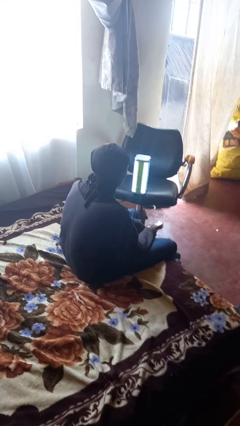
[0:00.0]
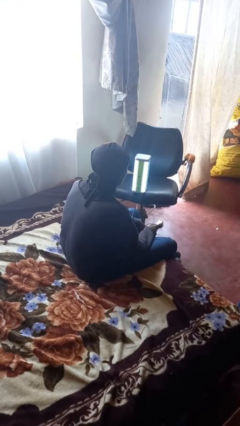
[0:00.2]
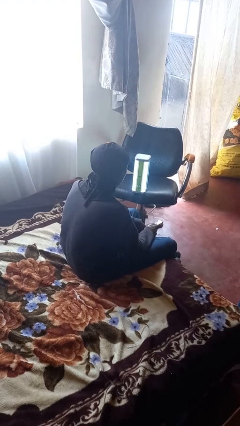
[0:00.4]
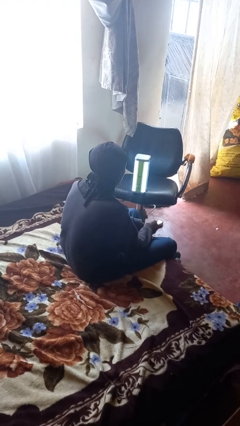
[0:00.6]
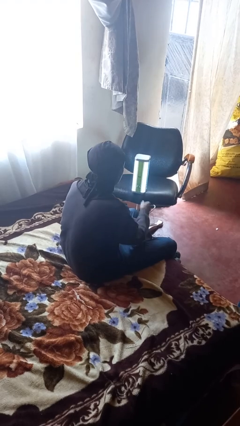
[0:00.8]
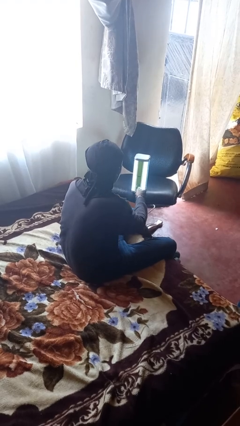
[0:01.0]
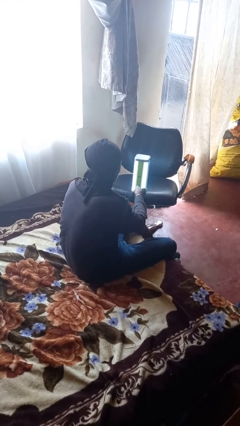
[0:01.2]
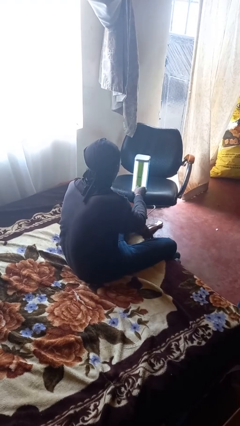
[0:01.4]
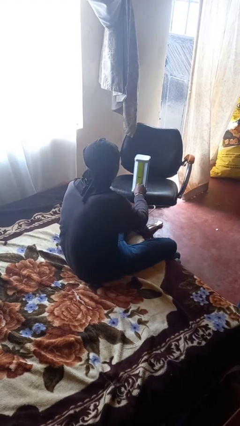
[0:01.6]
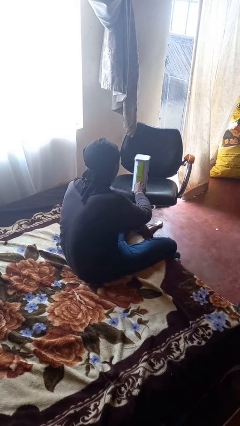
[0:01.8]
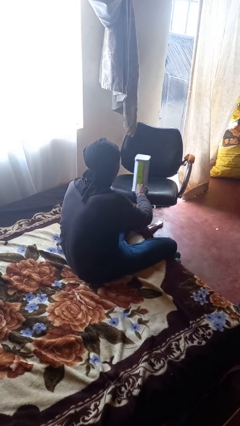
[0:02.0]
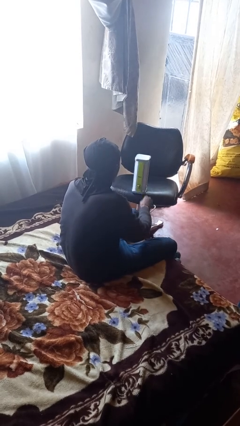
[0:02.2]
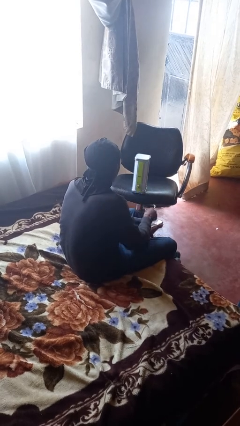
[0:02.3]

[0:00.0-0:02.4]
person turns off lamp

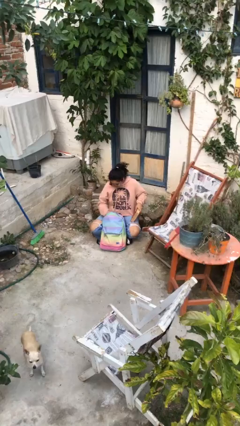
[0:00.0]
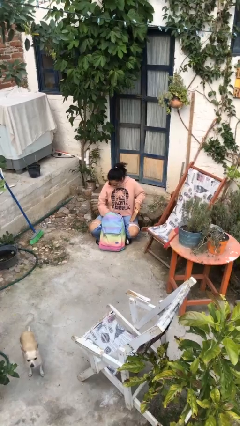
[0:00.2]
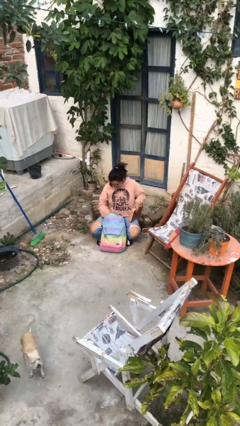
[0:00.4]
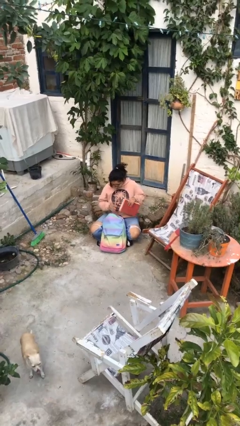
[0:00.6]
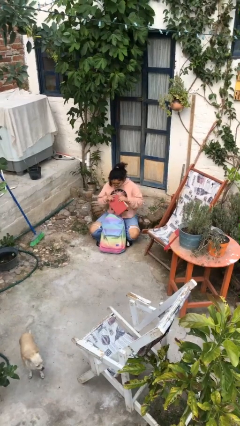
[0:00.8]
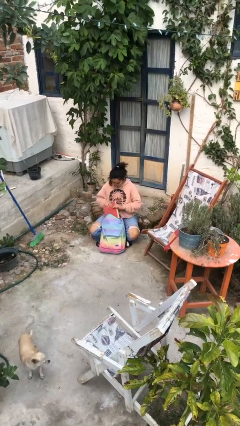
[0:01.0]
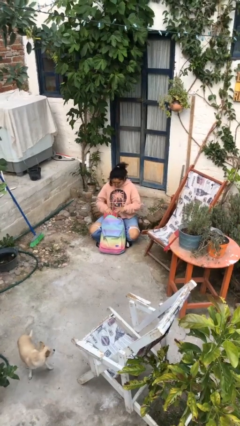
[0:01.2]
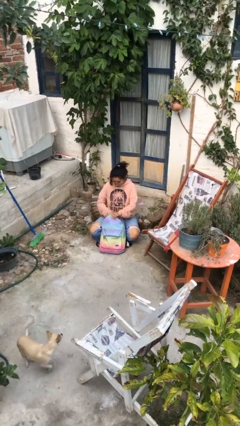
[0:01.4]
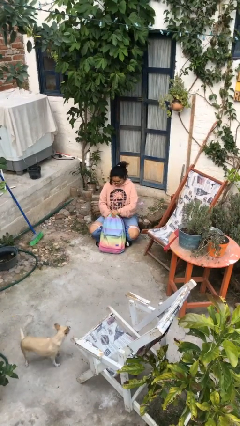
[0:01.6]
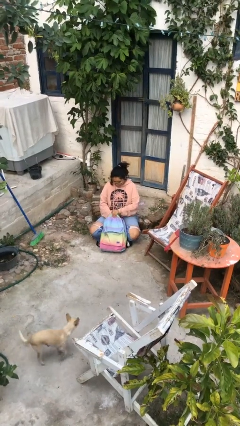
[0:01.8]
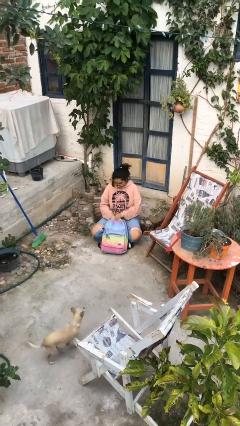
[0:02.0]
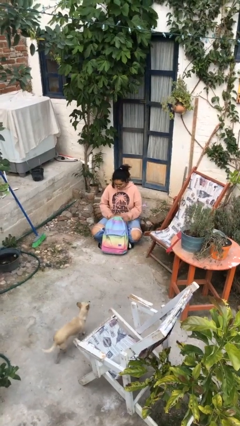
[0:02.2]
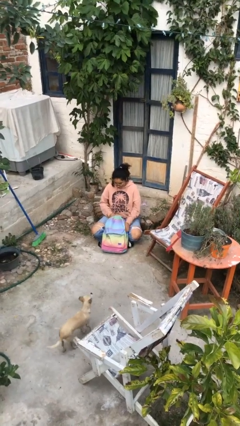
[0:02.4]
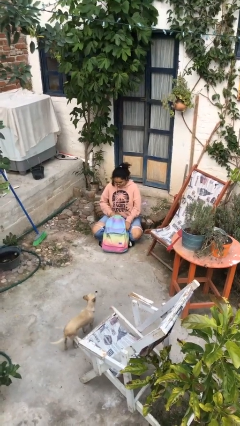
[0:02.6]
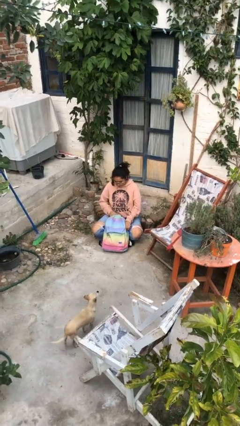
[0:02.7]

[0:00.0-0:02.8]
person puts object into backpack

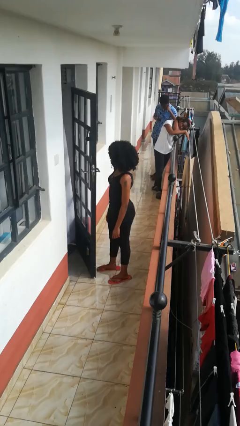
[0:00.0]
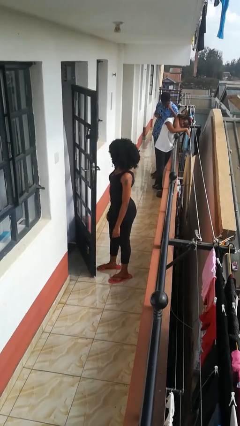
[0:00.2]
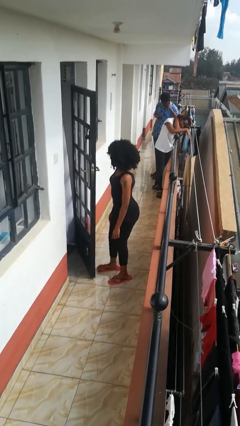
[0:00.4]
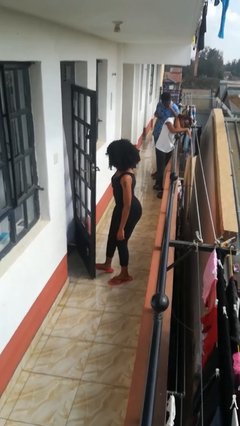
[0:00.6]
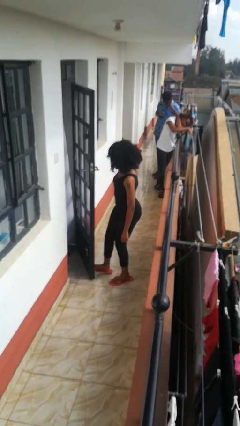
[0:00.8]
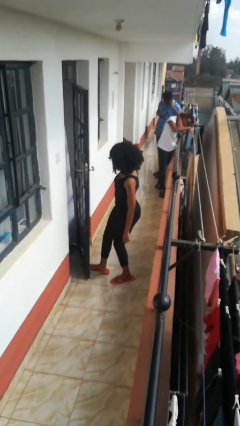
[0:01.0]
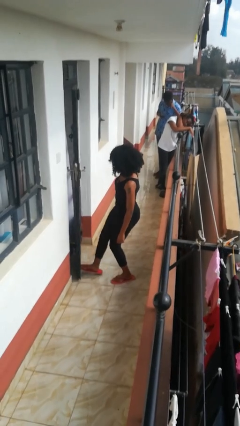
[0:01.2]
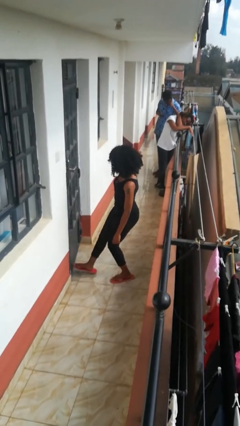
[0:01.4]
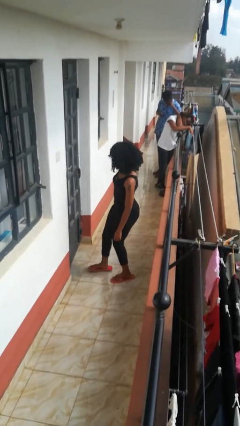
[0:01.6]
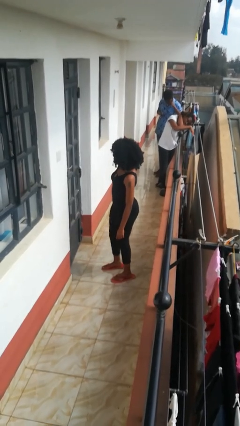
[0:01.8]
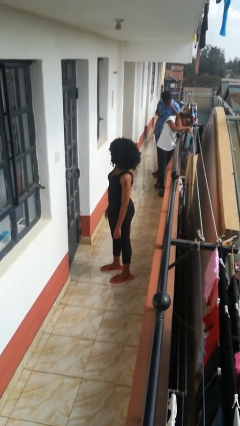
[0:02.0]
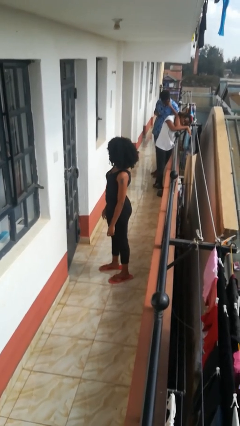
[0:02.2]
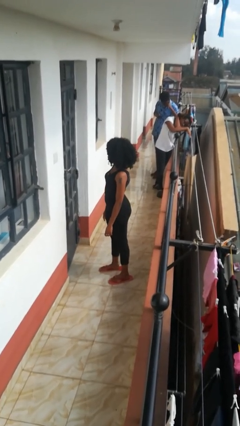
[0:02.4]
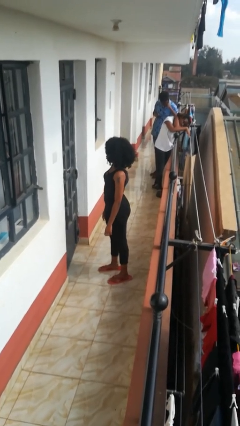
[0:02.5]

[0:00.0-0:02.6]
person closes door with foot

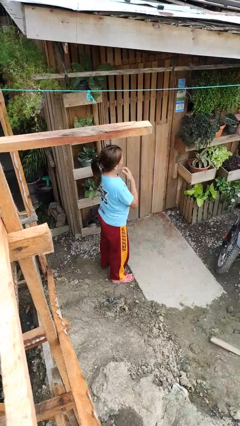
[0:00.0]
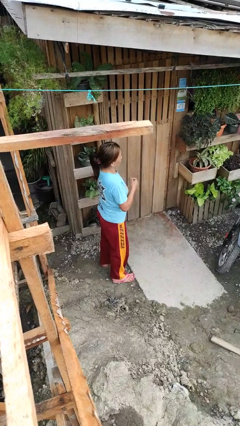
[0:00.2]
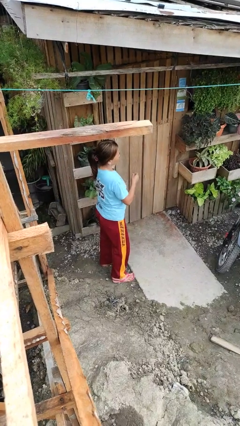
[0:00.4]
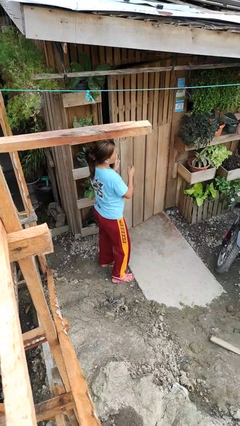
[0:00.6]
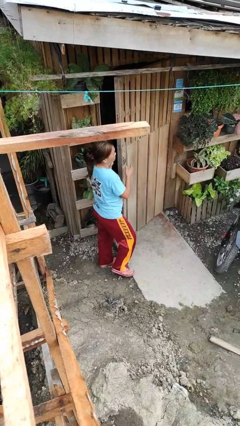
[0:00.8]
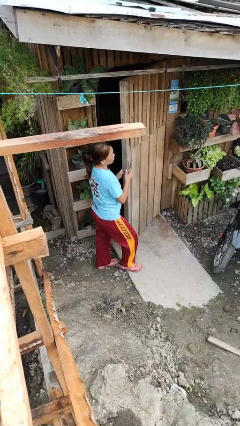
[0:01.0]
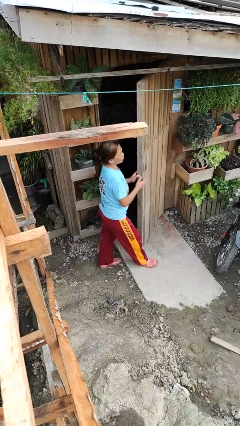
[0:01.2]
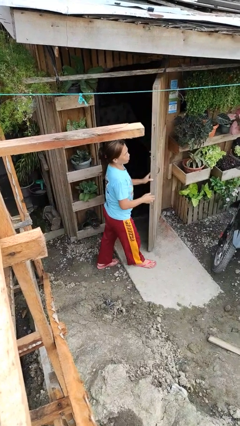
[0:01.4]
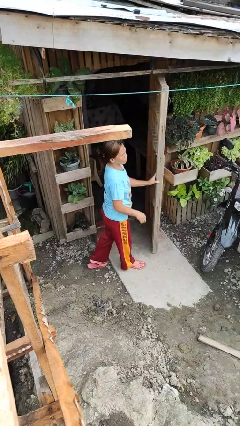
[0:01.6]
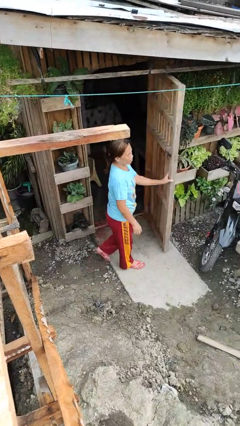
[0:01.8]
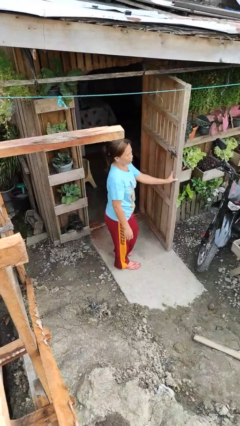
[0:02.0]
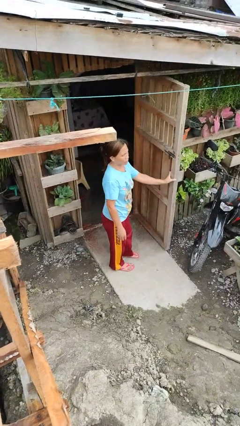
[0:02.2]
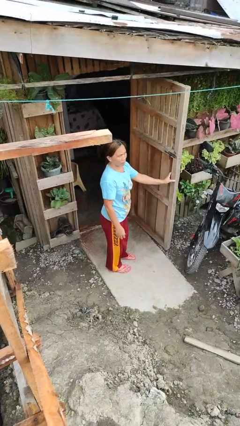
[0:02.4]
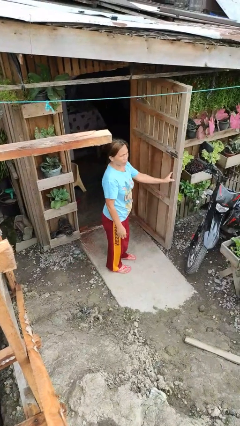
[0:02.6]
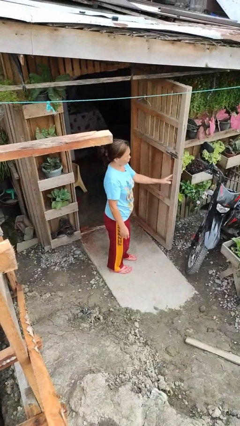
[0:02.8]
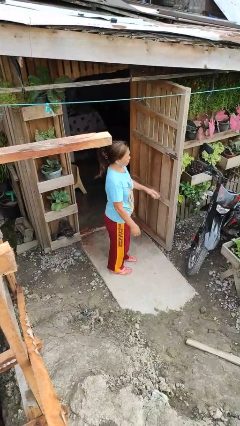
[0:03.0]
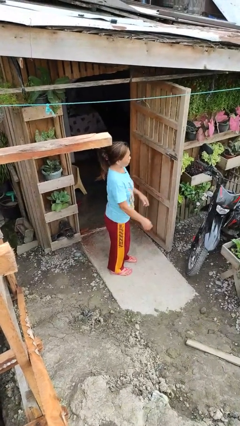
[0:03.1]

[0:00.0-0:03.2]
person opens facility door

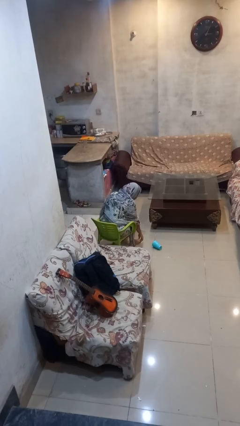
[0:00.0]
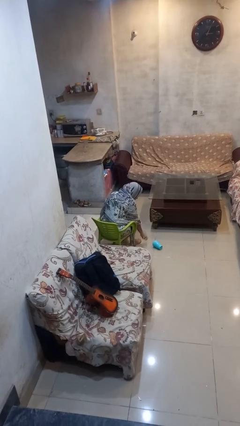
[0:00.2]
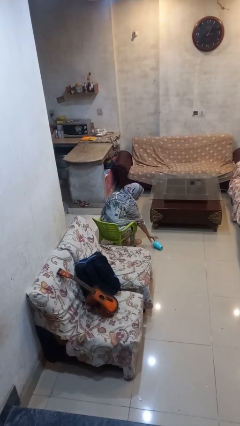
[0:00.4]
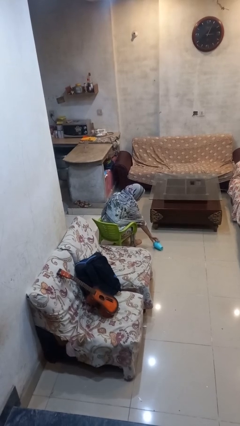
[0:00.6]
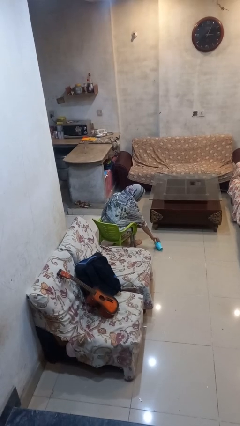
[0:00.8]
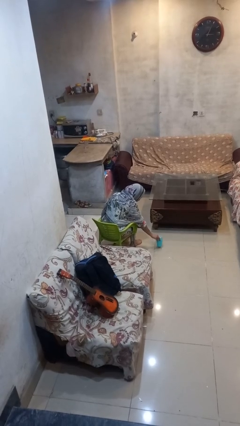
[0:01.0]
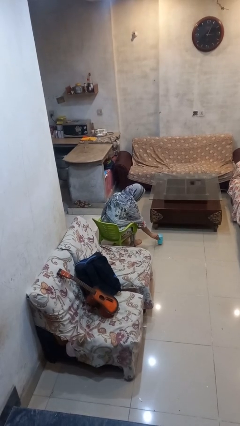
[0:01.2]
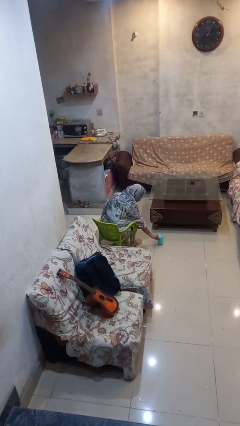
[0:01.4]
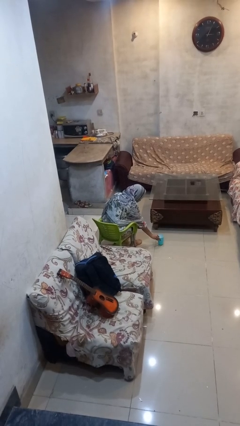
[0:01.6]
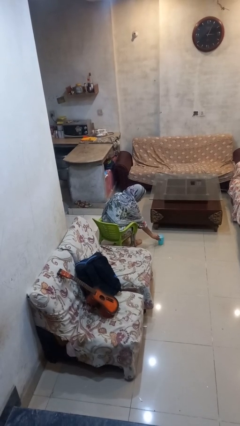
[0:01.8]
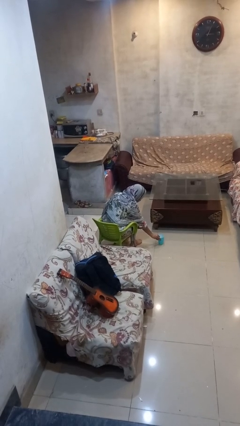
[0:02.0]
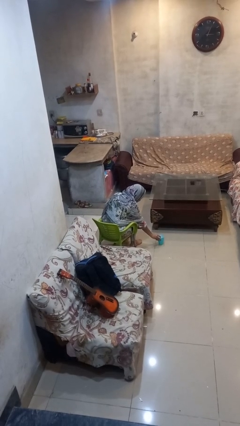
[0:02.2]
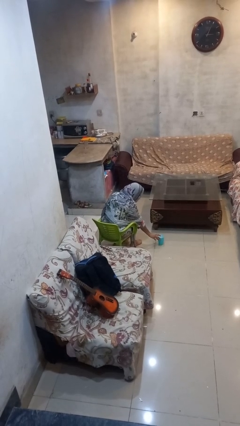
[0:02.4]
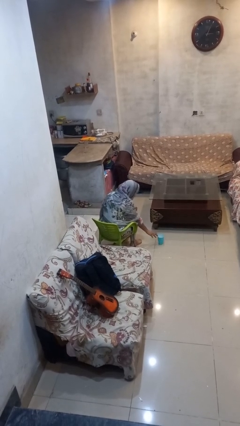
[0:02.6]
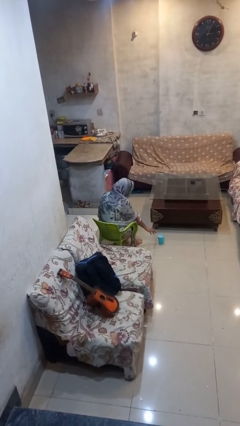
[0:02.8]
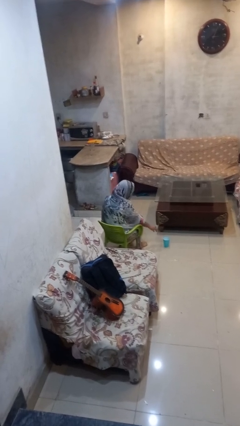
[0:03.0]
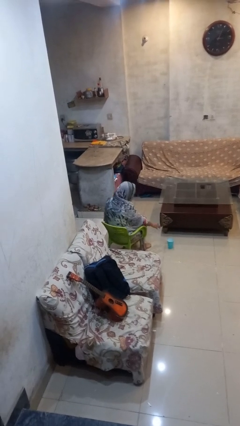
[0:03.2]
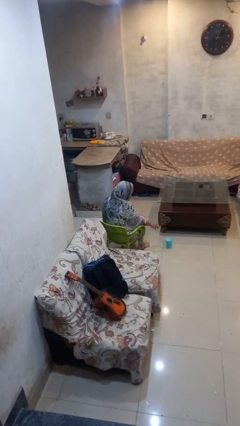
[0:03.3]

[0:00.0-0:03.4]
person sets upright glass

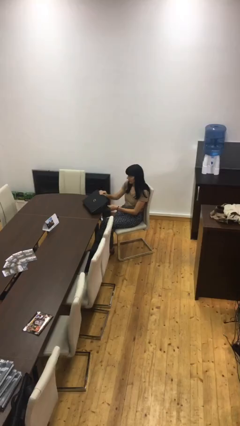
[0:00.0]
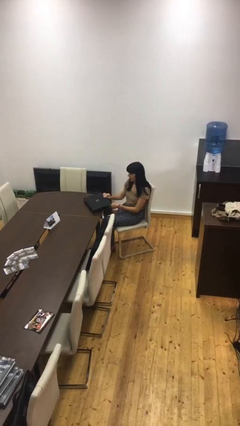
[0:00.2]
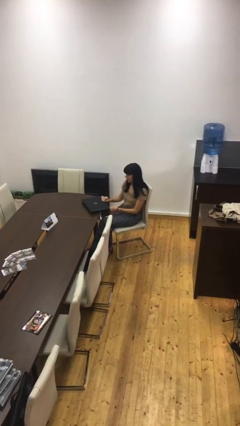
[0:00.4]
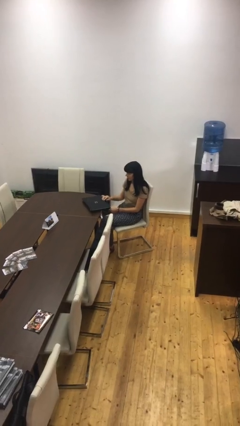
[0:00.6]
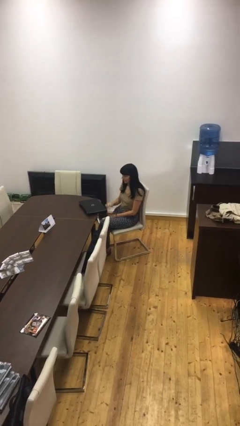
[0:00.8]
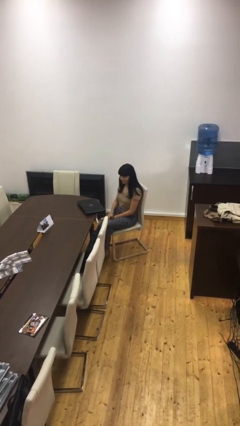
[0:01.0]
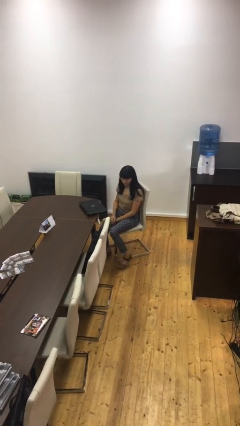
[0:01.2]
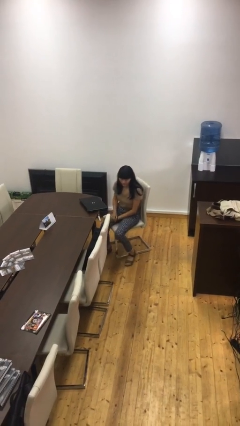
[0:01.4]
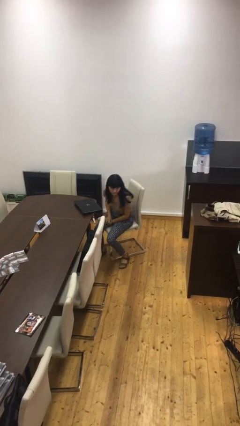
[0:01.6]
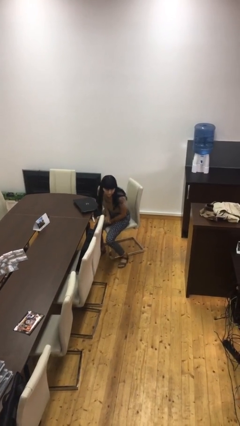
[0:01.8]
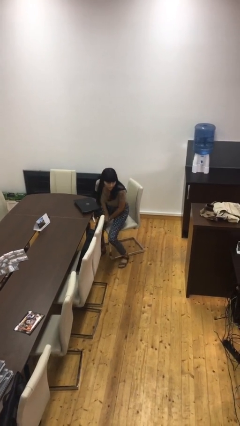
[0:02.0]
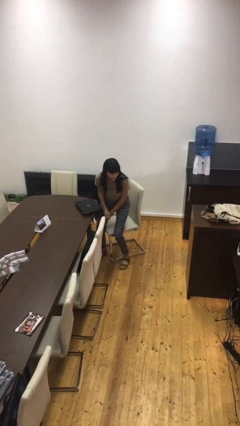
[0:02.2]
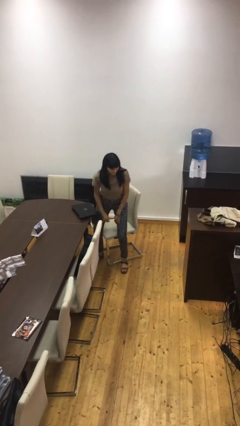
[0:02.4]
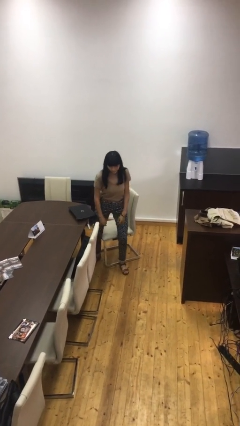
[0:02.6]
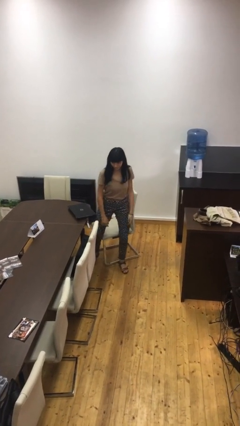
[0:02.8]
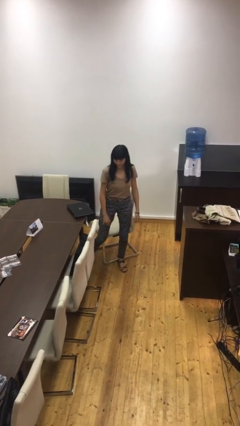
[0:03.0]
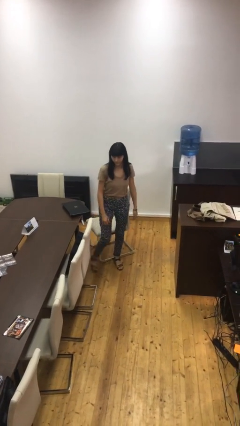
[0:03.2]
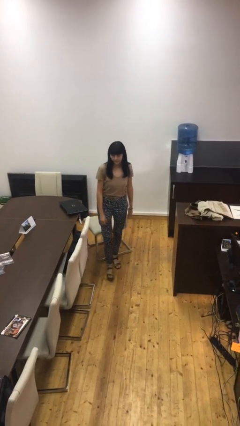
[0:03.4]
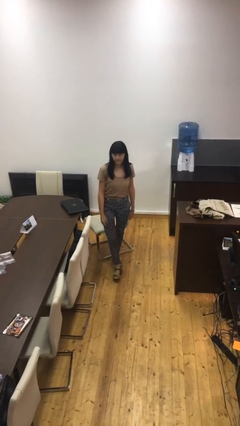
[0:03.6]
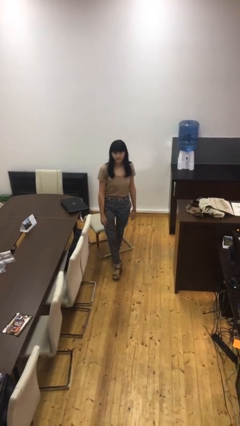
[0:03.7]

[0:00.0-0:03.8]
person stands up
